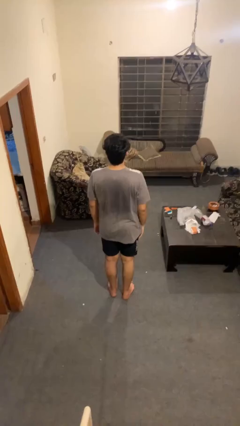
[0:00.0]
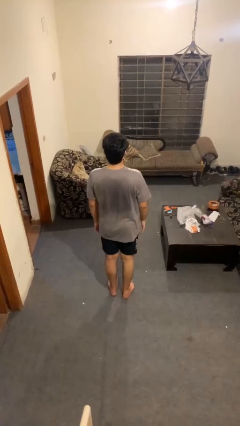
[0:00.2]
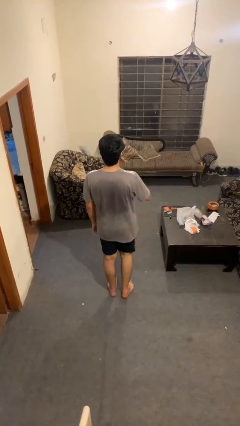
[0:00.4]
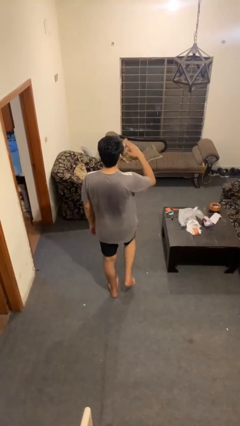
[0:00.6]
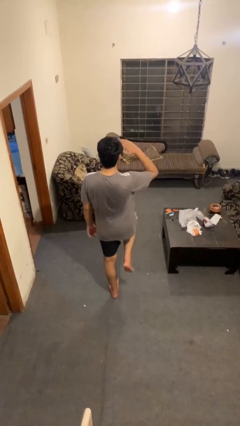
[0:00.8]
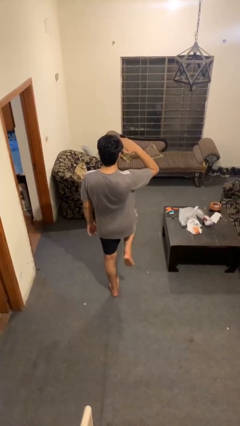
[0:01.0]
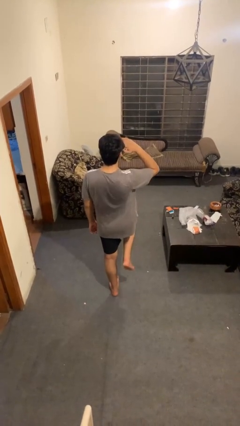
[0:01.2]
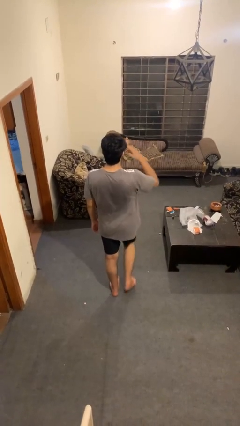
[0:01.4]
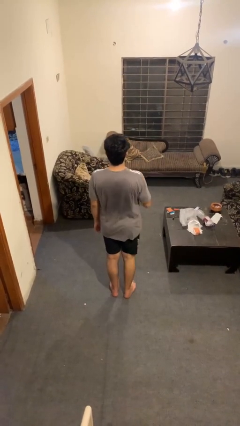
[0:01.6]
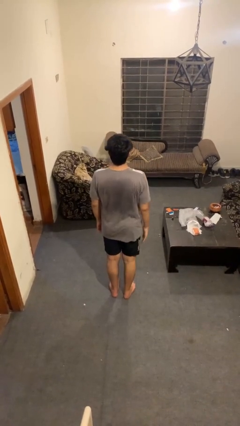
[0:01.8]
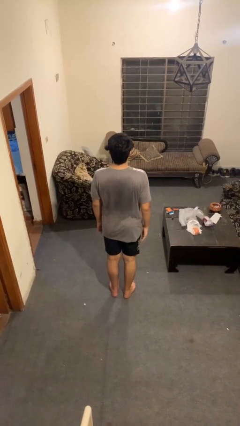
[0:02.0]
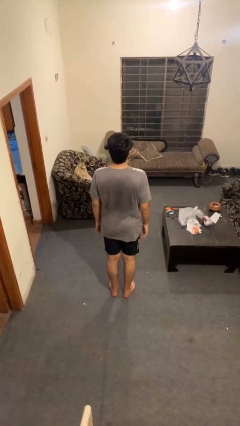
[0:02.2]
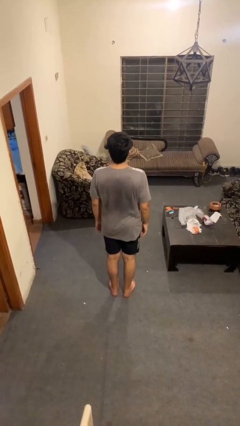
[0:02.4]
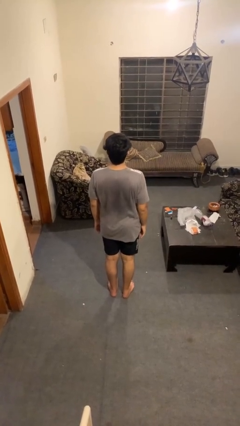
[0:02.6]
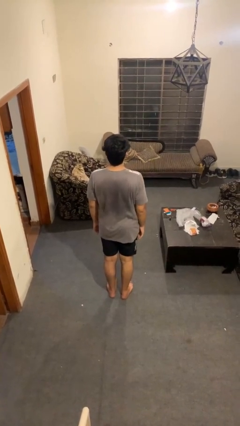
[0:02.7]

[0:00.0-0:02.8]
person salutes

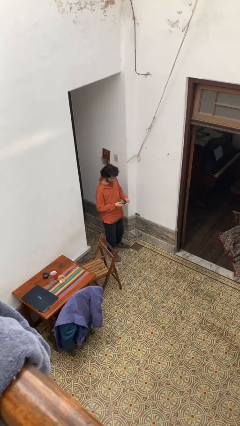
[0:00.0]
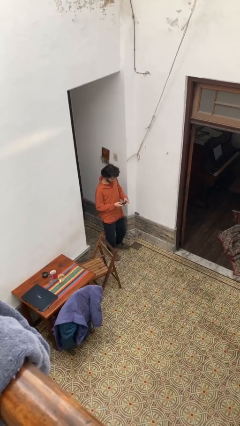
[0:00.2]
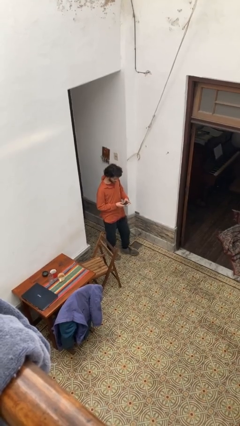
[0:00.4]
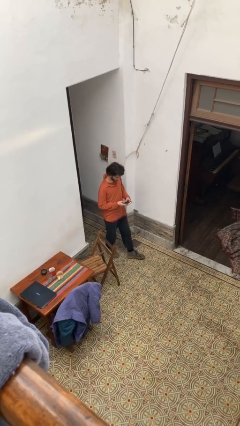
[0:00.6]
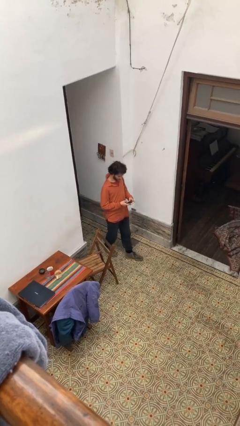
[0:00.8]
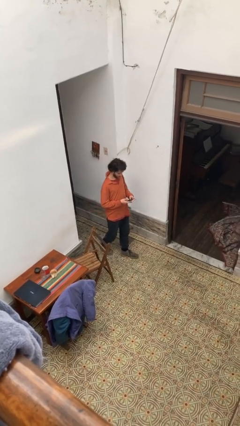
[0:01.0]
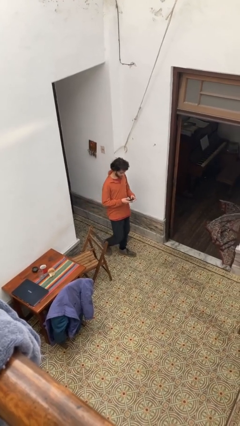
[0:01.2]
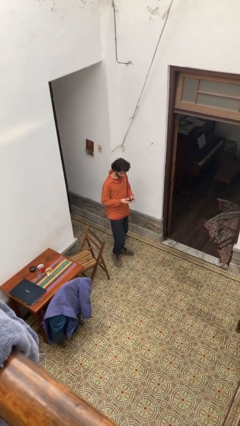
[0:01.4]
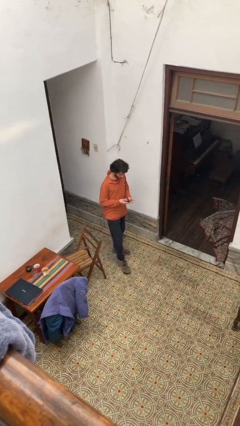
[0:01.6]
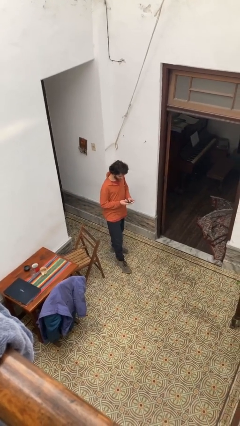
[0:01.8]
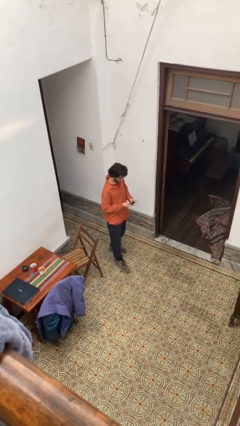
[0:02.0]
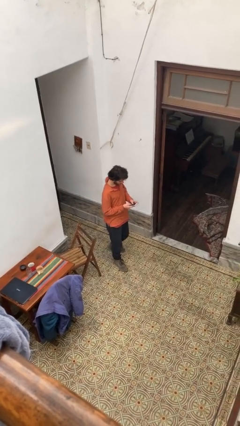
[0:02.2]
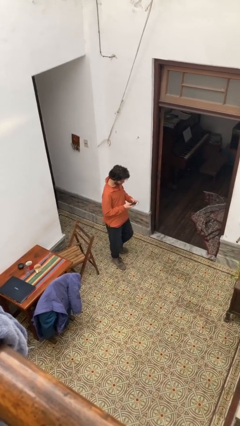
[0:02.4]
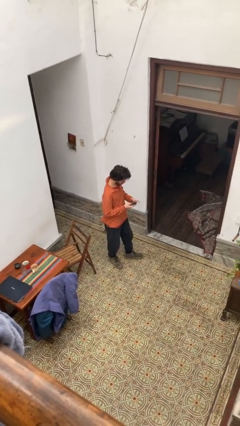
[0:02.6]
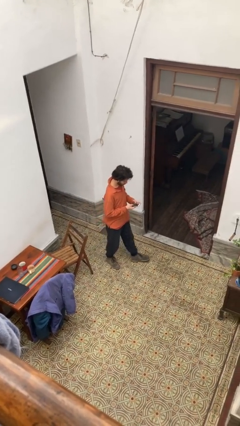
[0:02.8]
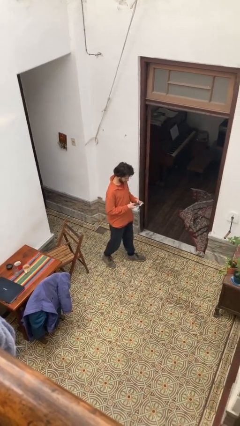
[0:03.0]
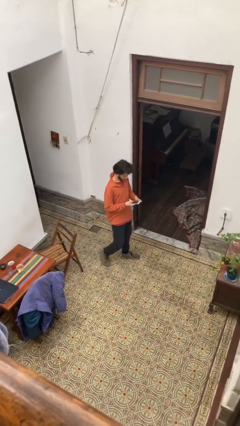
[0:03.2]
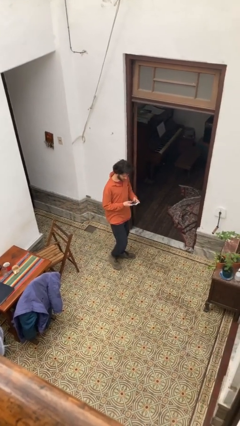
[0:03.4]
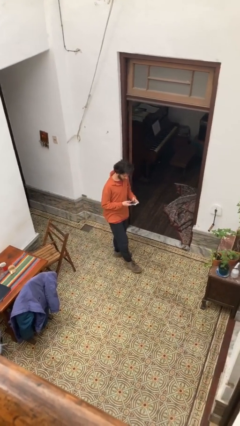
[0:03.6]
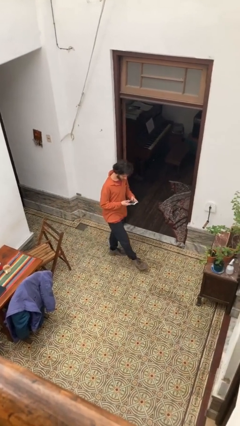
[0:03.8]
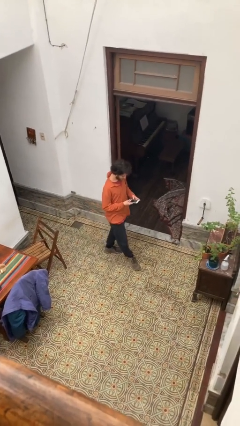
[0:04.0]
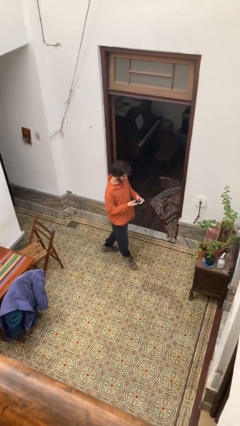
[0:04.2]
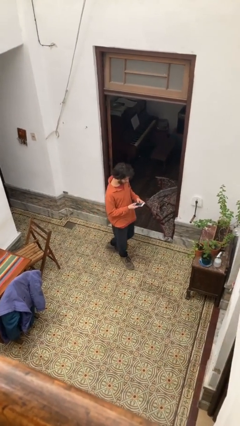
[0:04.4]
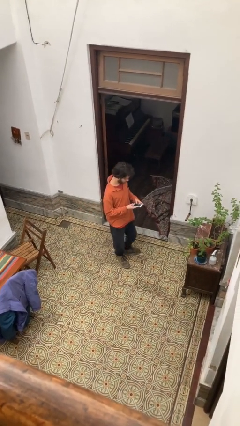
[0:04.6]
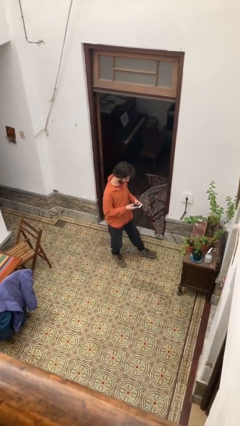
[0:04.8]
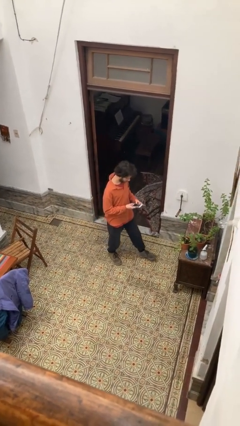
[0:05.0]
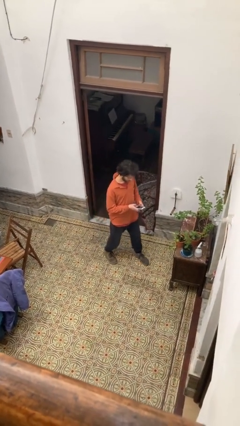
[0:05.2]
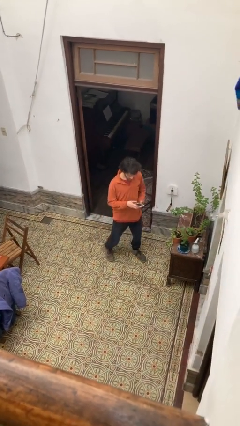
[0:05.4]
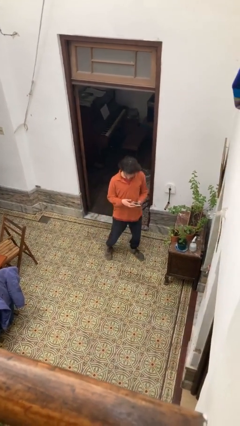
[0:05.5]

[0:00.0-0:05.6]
person texts on phone

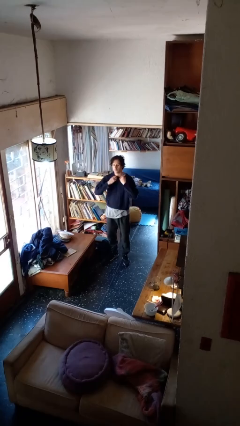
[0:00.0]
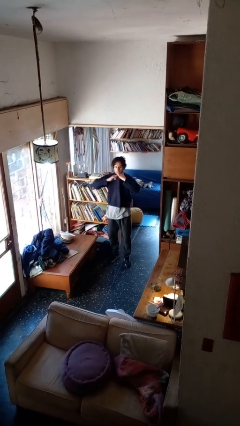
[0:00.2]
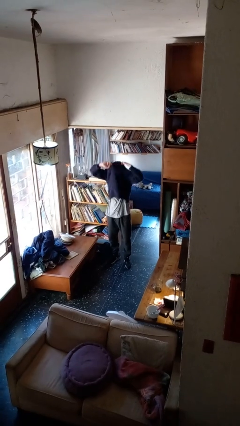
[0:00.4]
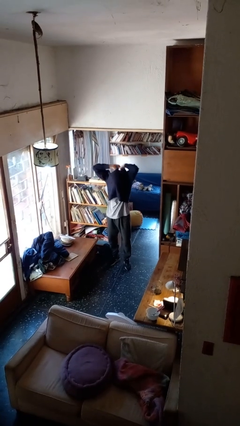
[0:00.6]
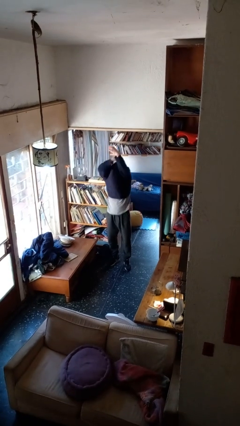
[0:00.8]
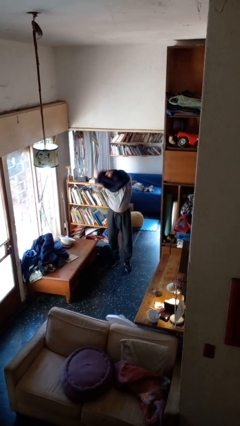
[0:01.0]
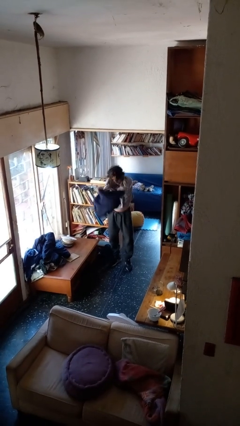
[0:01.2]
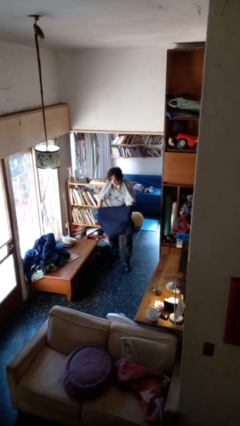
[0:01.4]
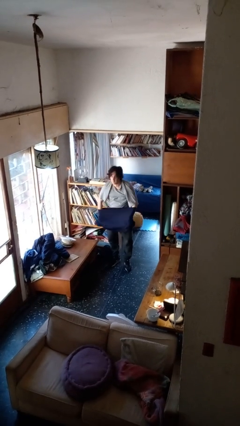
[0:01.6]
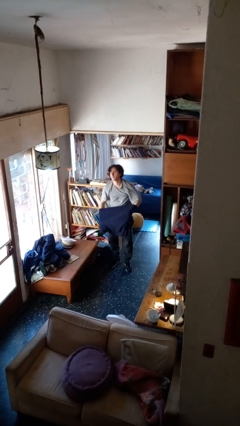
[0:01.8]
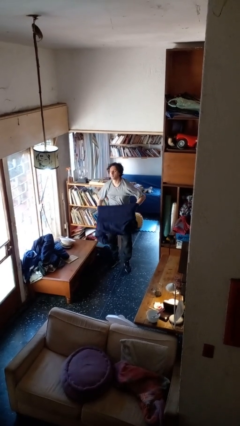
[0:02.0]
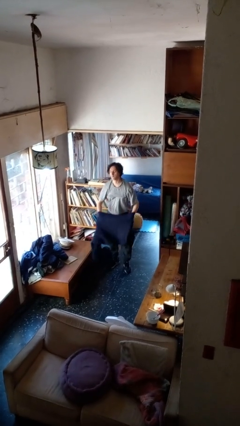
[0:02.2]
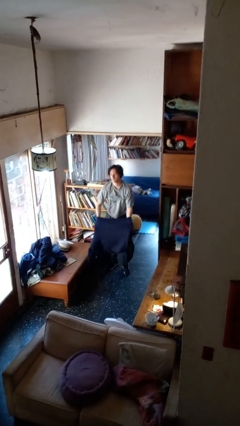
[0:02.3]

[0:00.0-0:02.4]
person takes off shirt

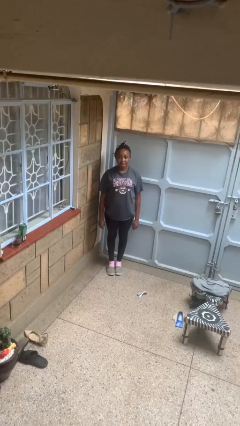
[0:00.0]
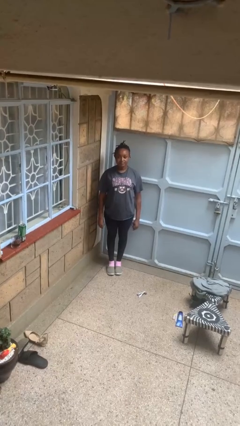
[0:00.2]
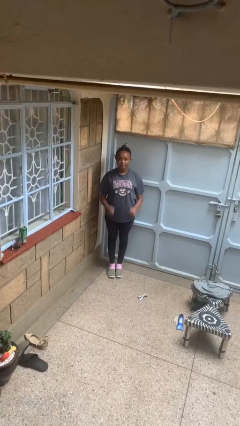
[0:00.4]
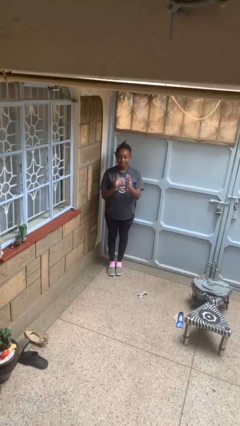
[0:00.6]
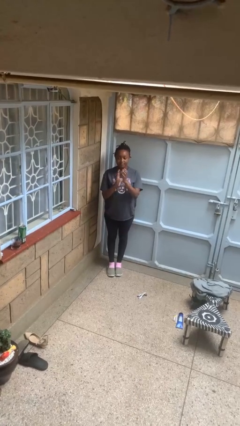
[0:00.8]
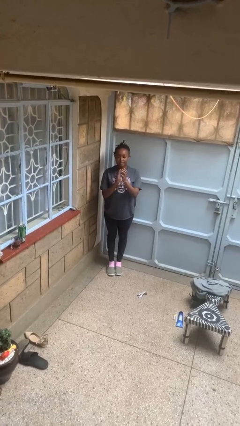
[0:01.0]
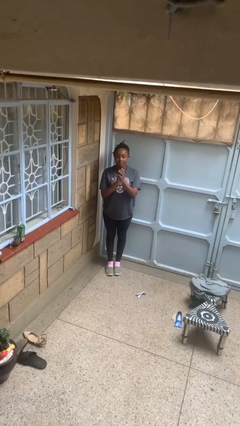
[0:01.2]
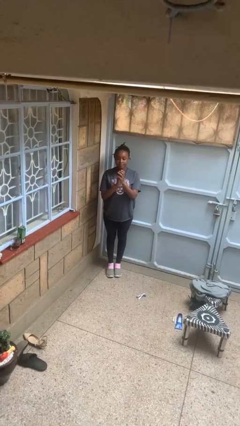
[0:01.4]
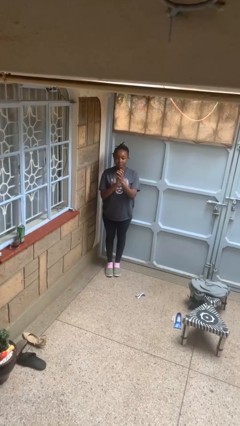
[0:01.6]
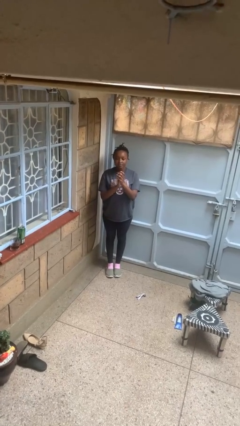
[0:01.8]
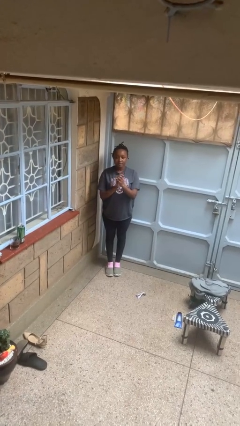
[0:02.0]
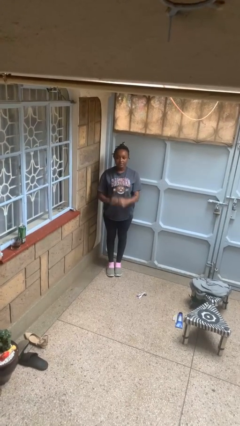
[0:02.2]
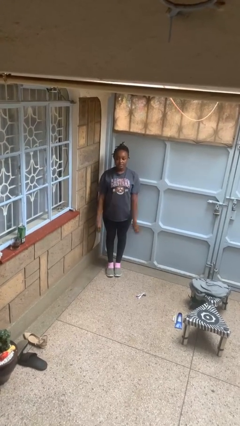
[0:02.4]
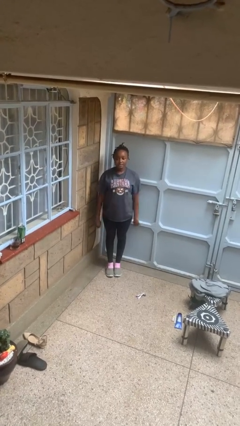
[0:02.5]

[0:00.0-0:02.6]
person claps hands

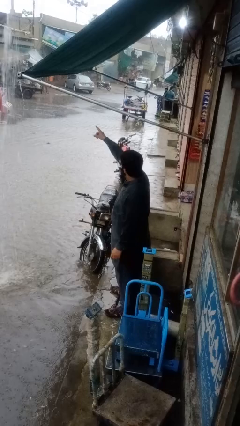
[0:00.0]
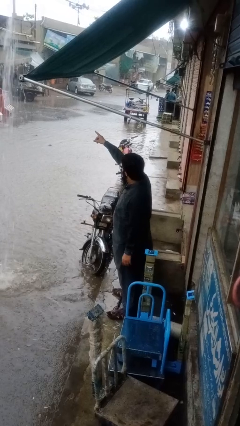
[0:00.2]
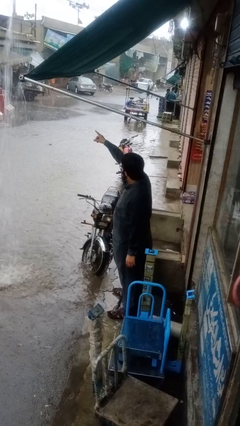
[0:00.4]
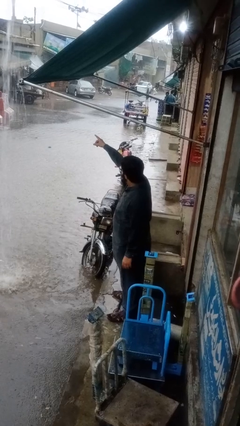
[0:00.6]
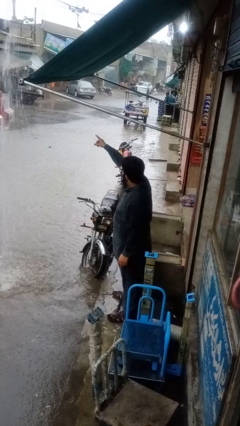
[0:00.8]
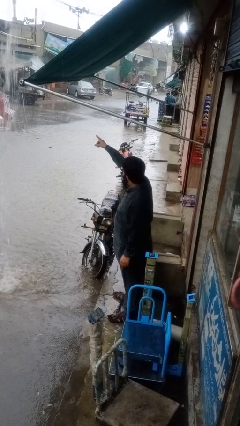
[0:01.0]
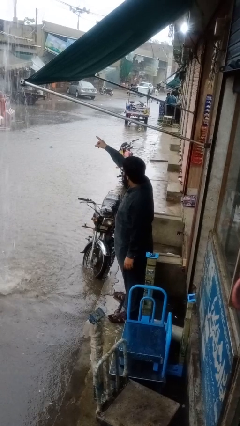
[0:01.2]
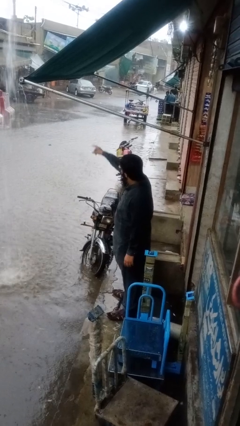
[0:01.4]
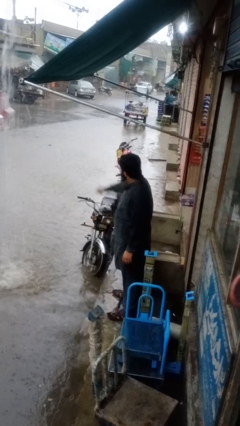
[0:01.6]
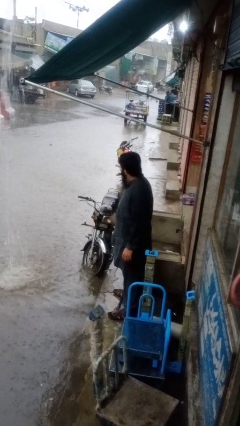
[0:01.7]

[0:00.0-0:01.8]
person points at person

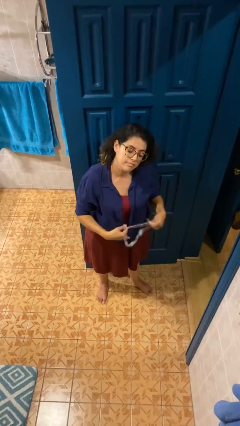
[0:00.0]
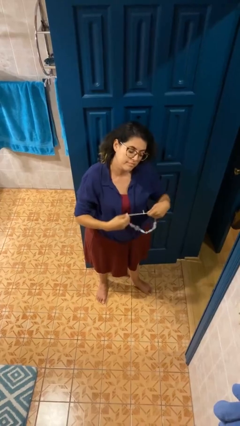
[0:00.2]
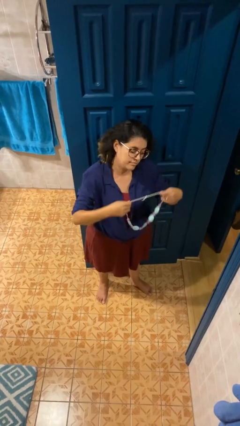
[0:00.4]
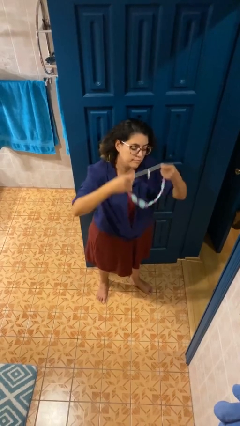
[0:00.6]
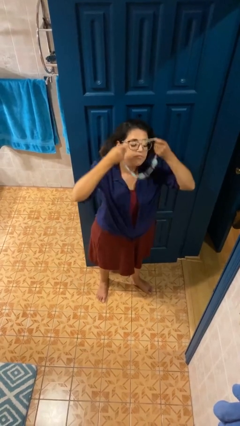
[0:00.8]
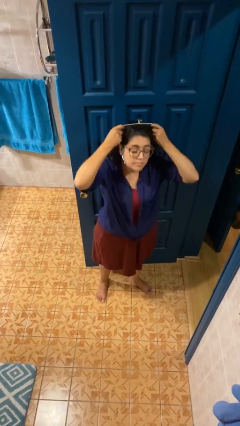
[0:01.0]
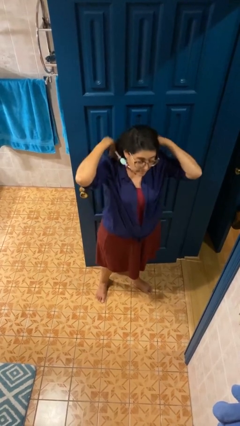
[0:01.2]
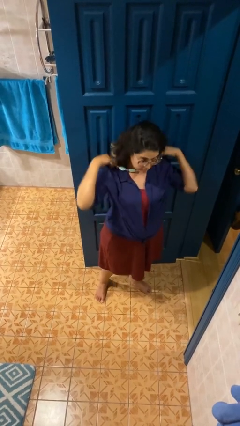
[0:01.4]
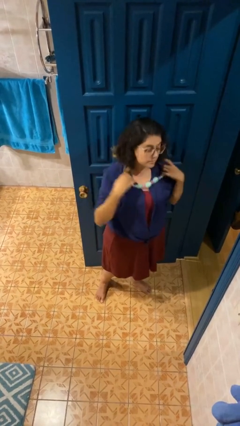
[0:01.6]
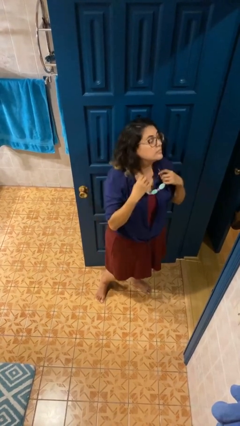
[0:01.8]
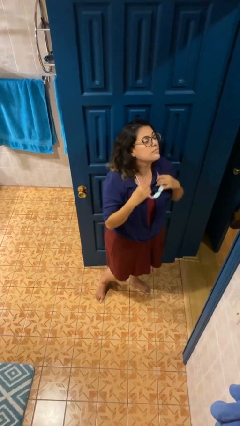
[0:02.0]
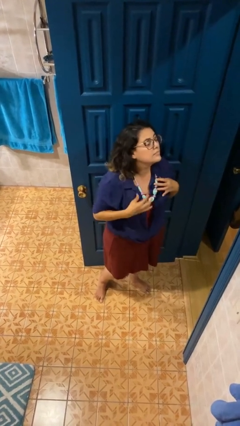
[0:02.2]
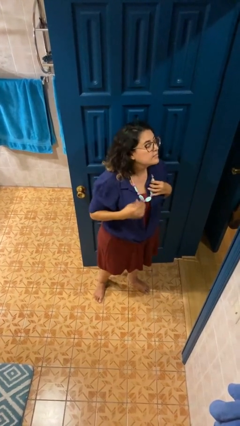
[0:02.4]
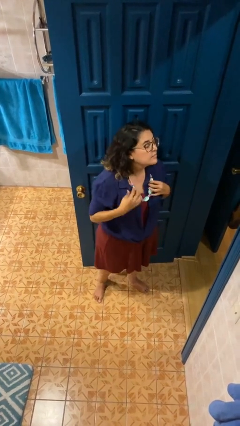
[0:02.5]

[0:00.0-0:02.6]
person puts on necklace
